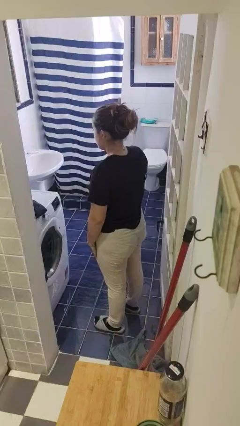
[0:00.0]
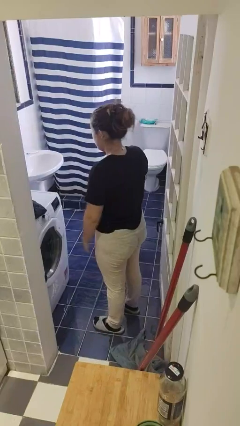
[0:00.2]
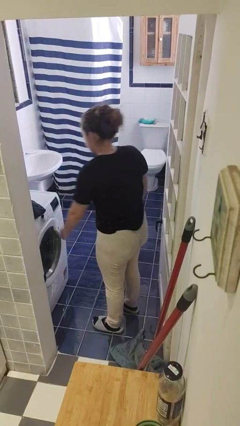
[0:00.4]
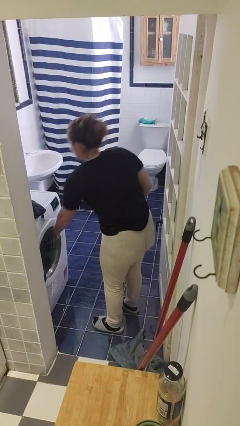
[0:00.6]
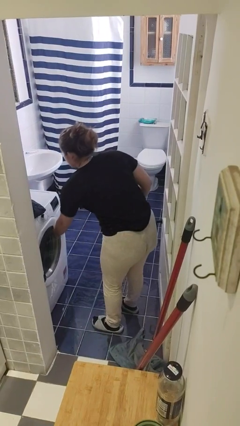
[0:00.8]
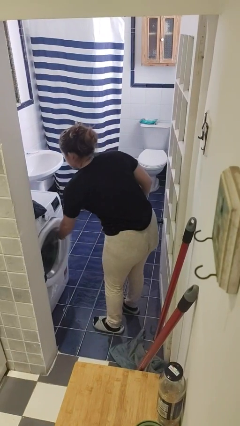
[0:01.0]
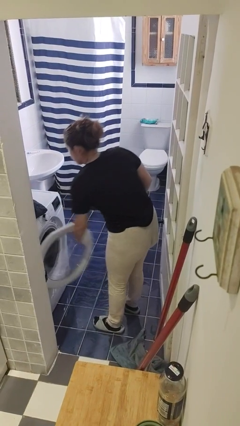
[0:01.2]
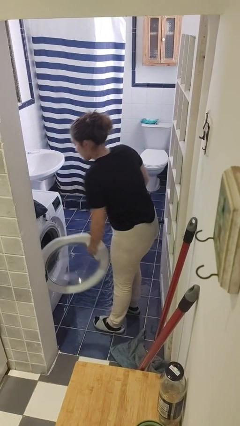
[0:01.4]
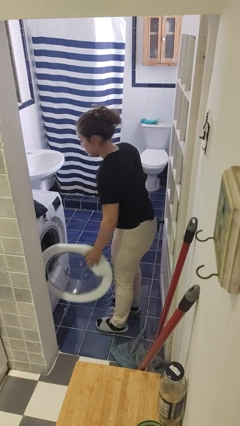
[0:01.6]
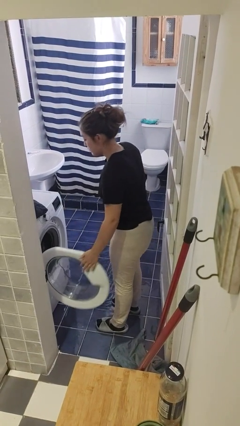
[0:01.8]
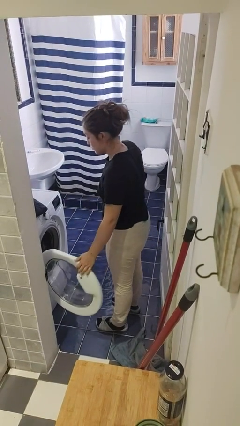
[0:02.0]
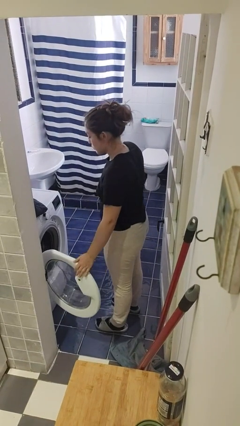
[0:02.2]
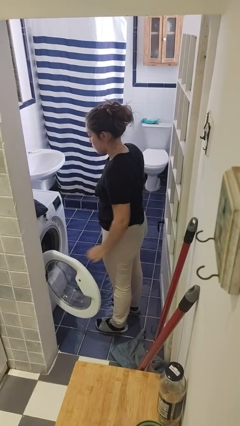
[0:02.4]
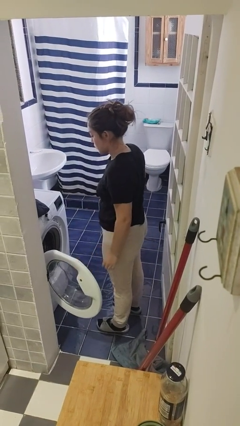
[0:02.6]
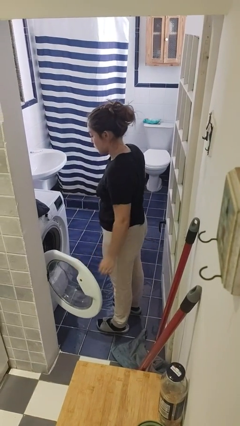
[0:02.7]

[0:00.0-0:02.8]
person opens clothes washer

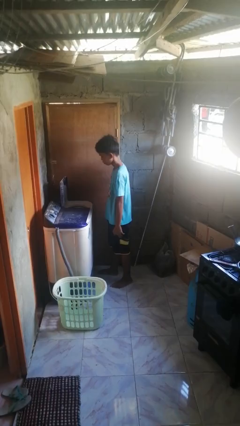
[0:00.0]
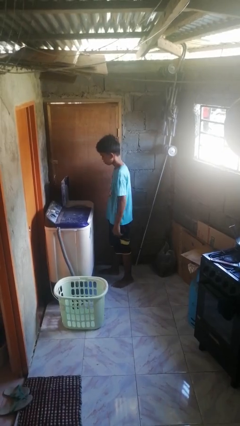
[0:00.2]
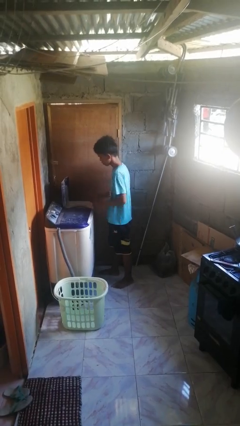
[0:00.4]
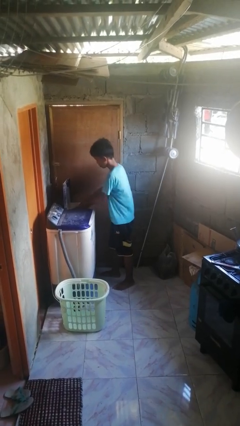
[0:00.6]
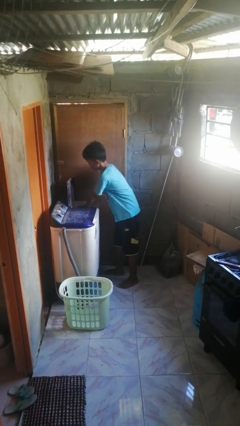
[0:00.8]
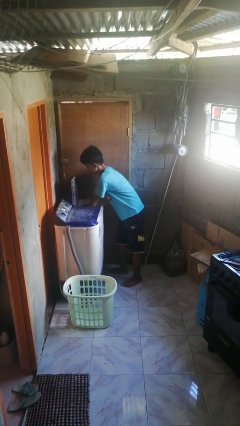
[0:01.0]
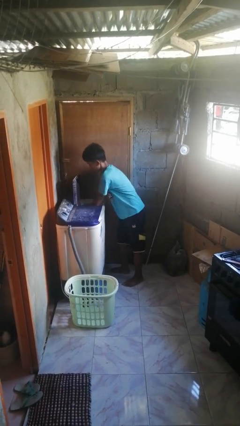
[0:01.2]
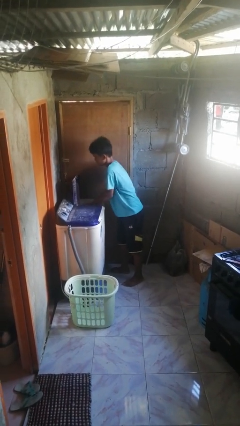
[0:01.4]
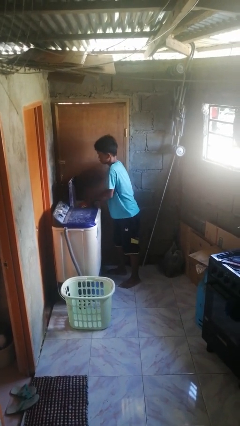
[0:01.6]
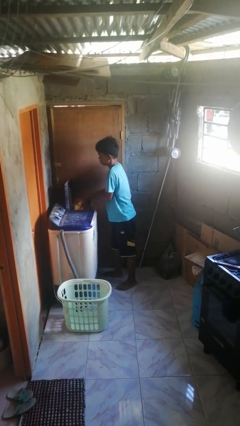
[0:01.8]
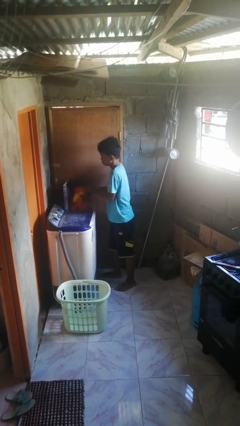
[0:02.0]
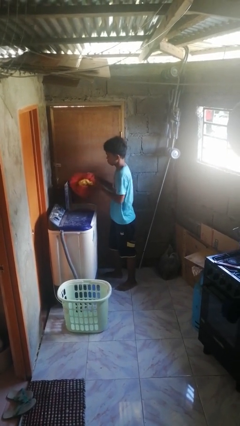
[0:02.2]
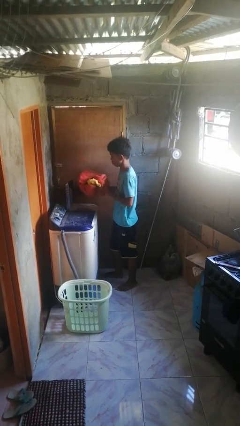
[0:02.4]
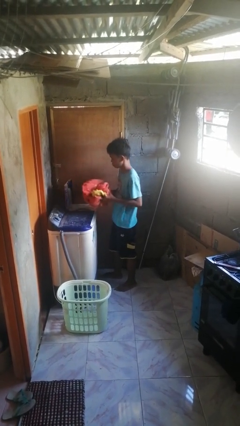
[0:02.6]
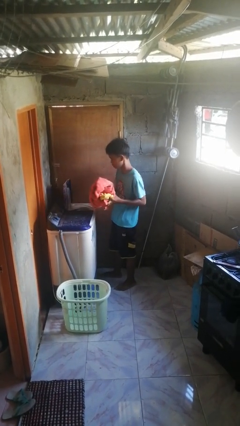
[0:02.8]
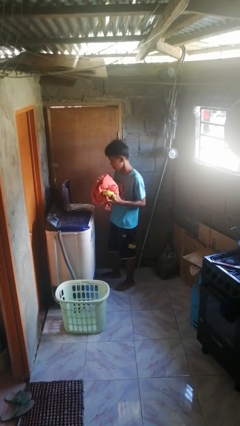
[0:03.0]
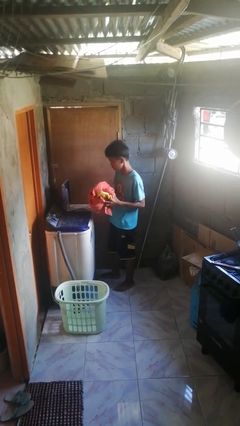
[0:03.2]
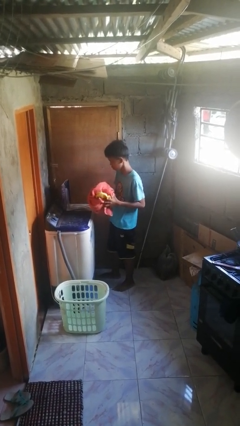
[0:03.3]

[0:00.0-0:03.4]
person unloads dryer

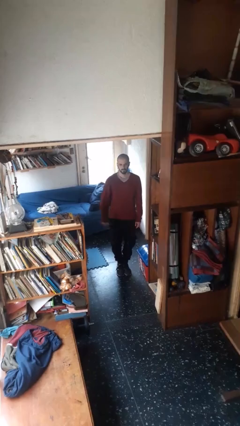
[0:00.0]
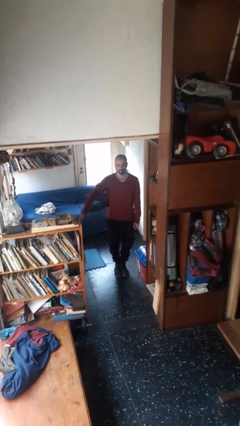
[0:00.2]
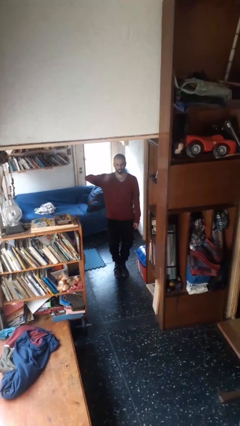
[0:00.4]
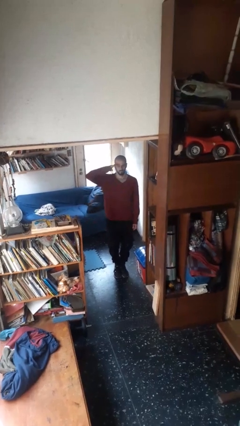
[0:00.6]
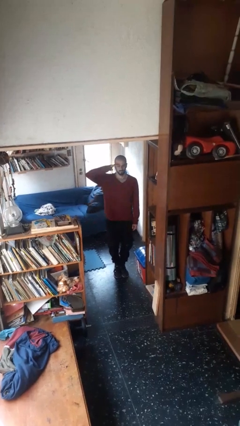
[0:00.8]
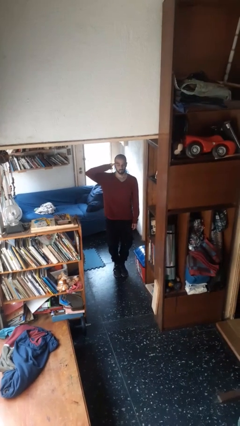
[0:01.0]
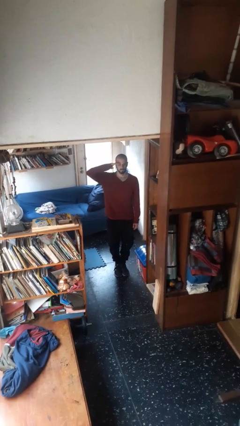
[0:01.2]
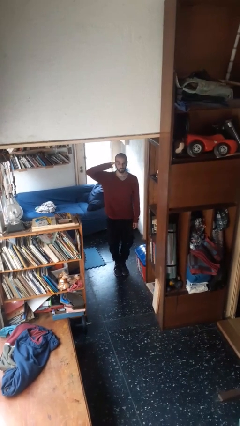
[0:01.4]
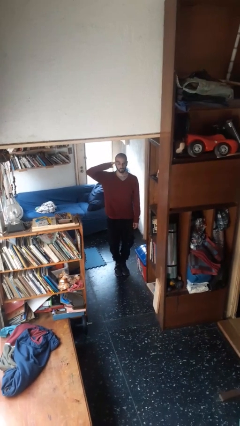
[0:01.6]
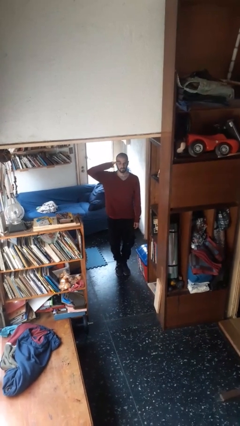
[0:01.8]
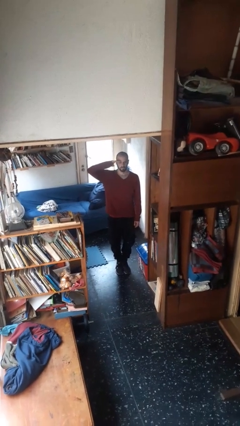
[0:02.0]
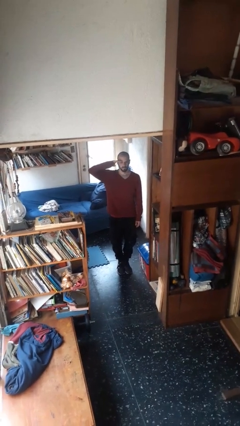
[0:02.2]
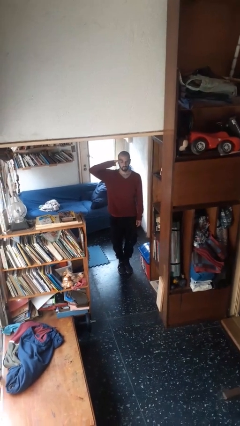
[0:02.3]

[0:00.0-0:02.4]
person salutes

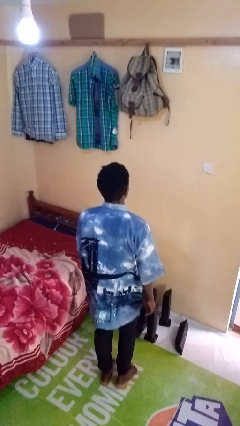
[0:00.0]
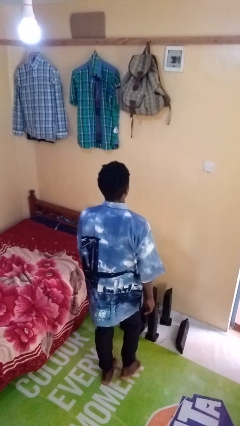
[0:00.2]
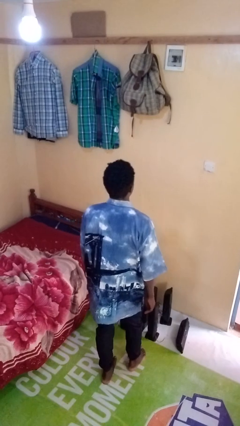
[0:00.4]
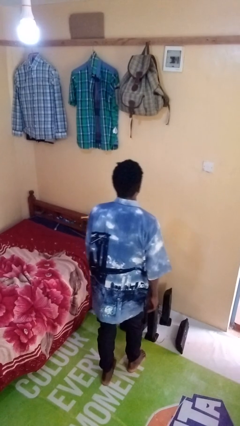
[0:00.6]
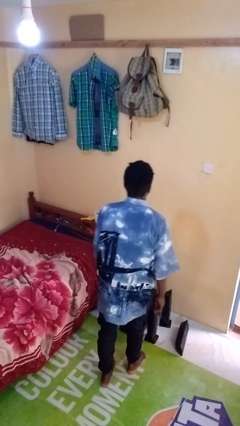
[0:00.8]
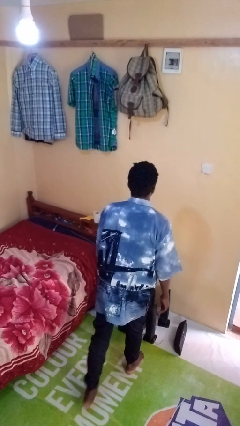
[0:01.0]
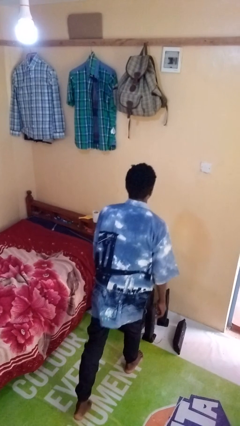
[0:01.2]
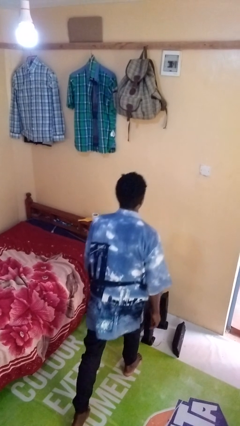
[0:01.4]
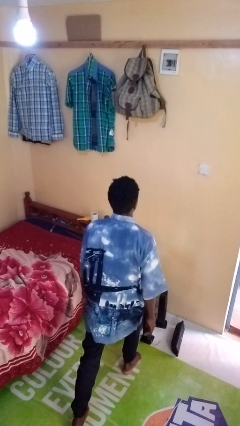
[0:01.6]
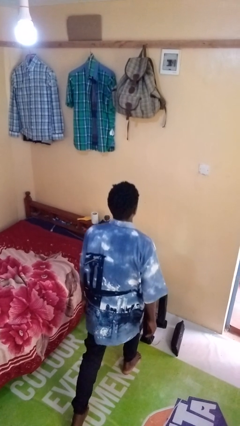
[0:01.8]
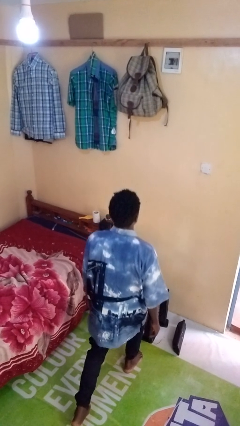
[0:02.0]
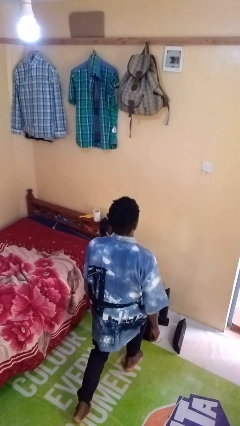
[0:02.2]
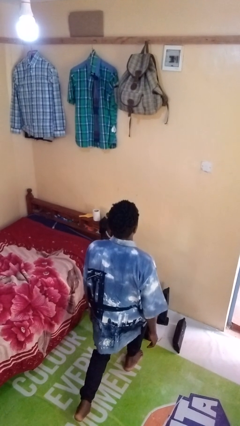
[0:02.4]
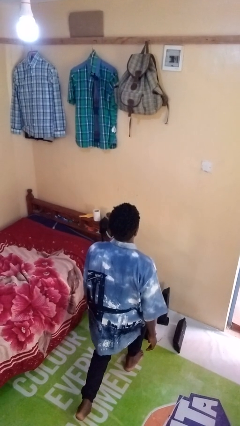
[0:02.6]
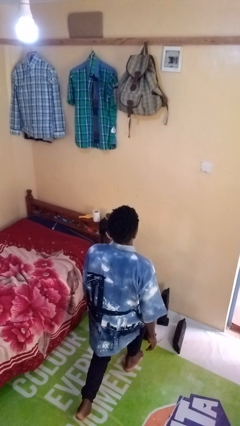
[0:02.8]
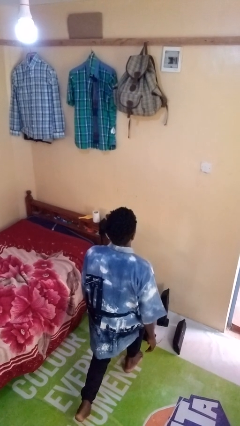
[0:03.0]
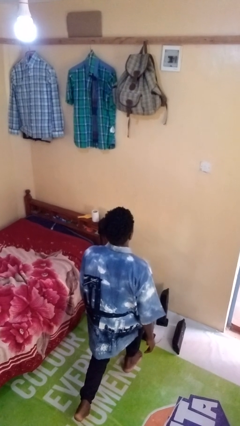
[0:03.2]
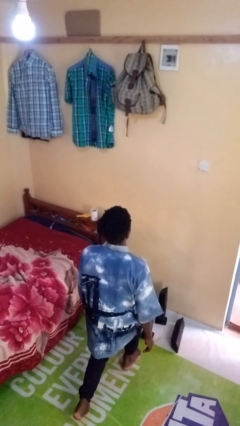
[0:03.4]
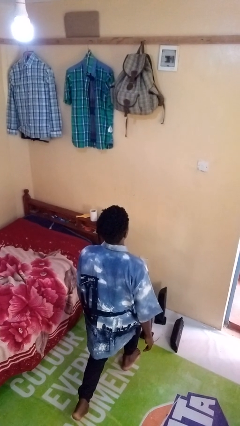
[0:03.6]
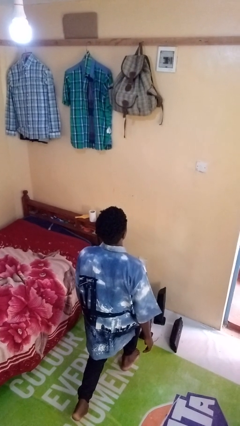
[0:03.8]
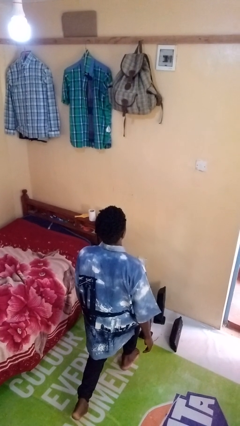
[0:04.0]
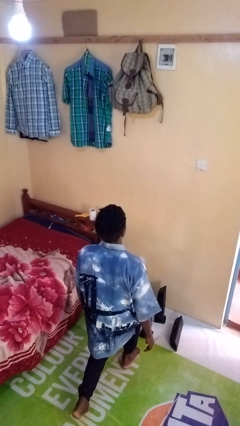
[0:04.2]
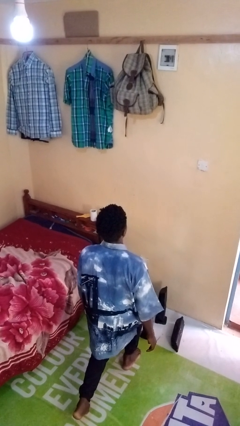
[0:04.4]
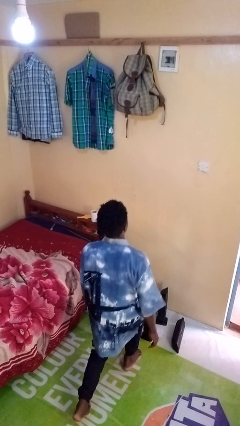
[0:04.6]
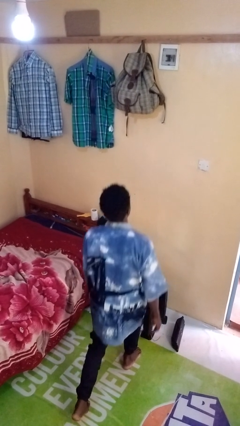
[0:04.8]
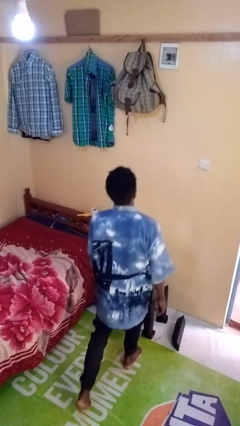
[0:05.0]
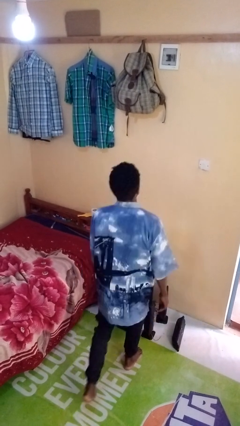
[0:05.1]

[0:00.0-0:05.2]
person exercises with lunges

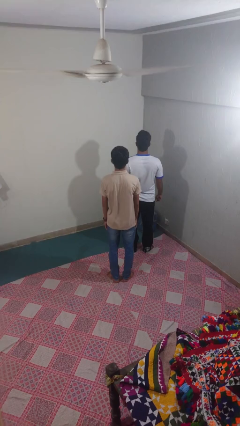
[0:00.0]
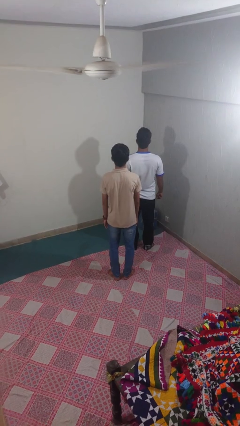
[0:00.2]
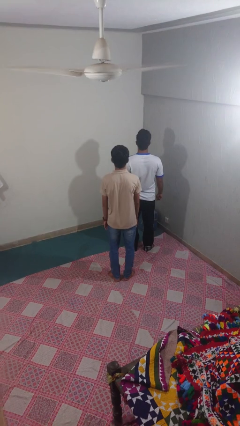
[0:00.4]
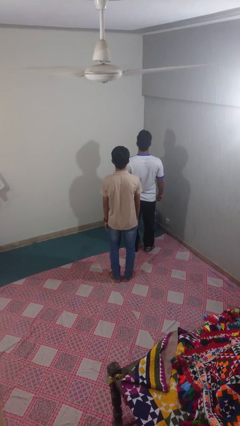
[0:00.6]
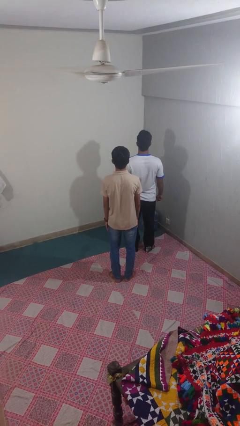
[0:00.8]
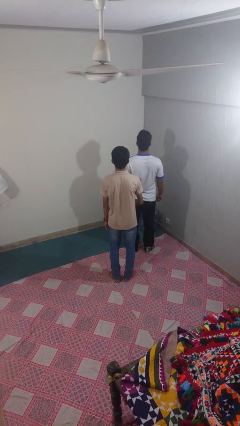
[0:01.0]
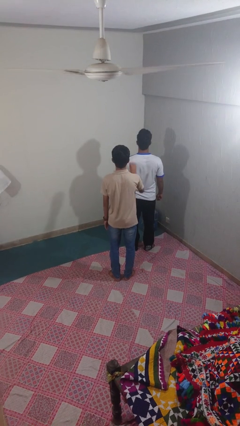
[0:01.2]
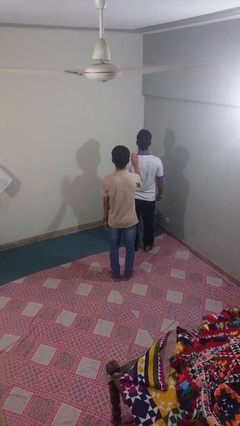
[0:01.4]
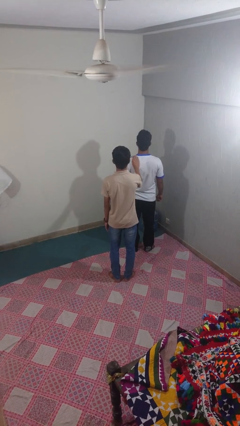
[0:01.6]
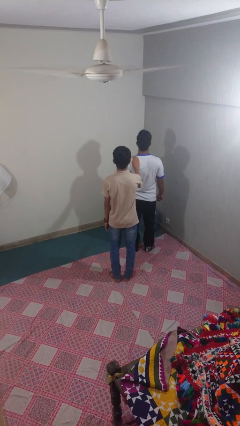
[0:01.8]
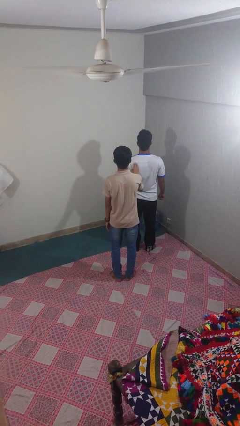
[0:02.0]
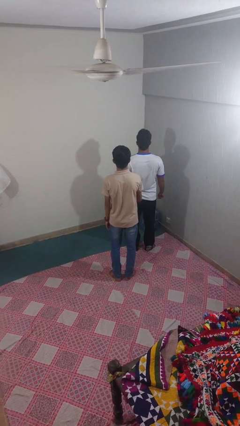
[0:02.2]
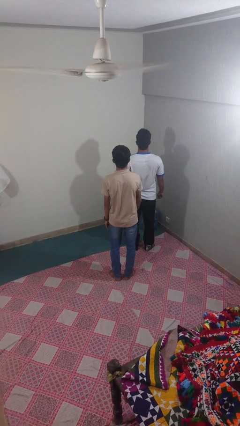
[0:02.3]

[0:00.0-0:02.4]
person touches back of person

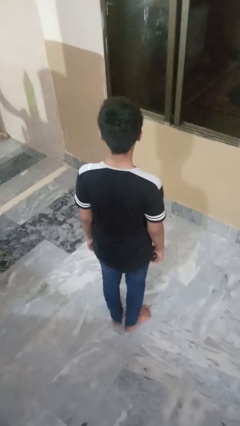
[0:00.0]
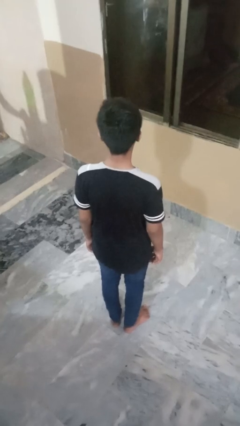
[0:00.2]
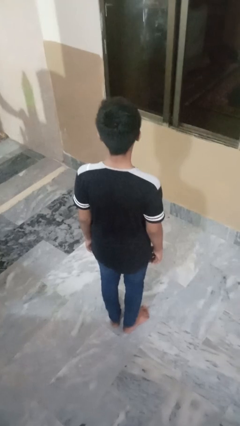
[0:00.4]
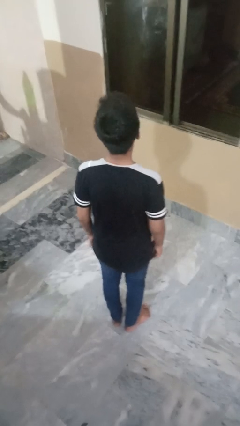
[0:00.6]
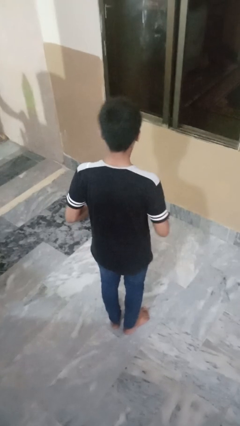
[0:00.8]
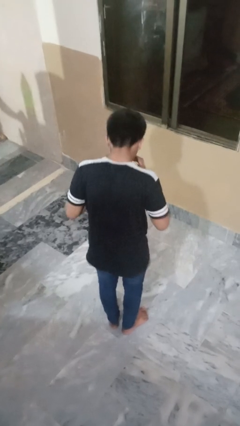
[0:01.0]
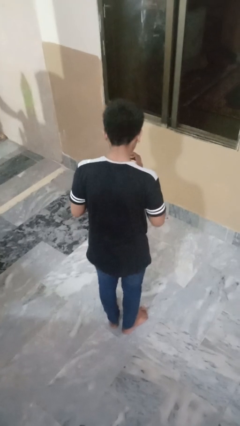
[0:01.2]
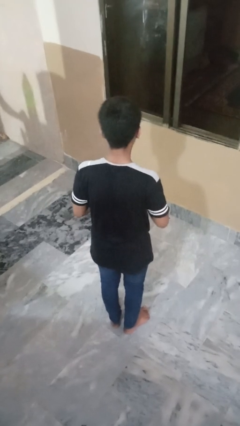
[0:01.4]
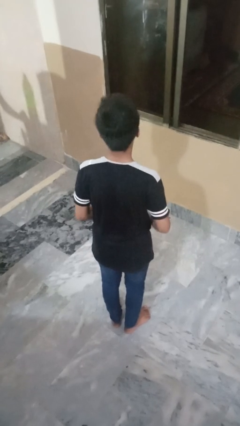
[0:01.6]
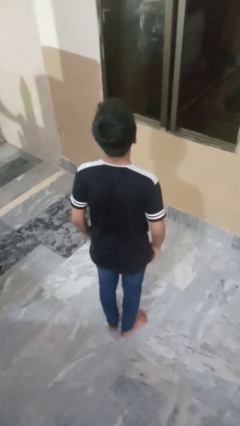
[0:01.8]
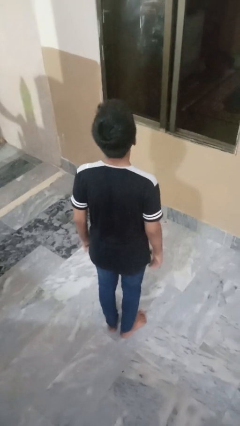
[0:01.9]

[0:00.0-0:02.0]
person sneezes into hand
